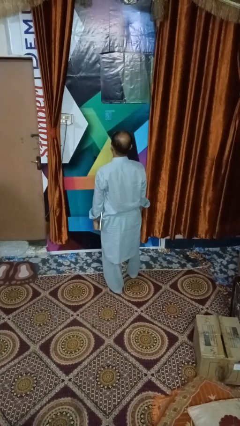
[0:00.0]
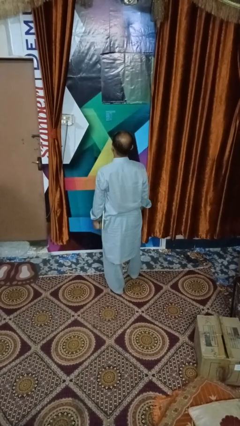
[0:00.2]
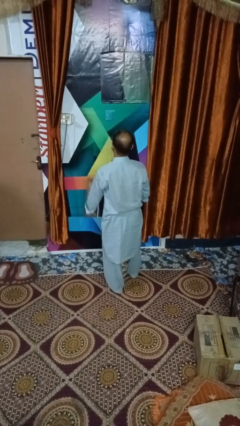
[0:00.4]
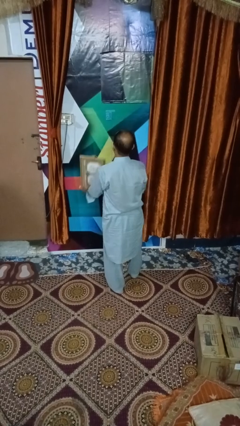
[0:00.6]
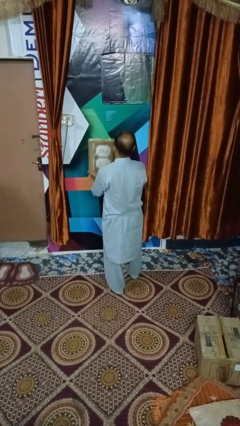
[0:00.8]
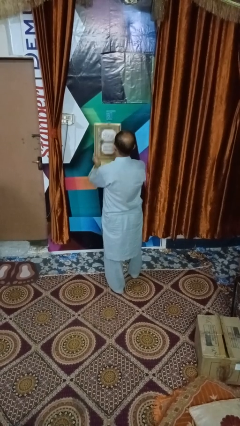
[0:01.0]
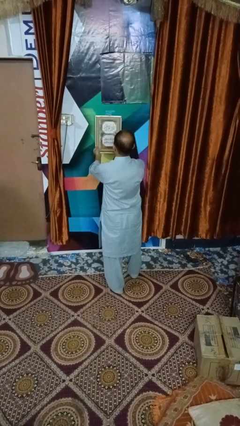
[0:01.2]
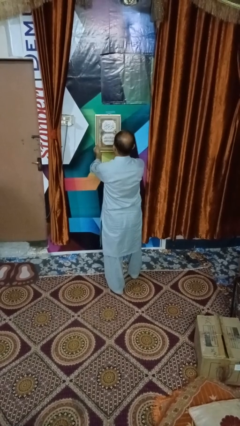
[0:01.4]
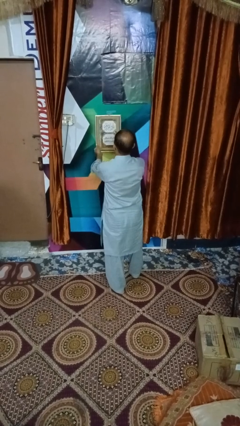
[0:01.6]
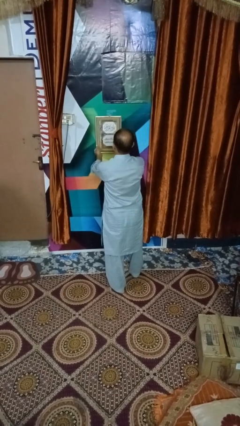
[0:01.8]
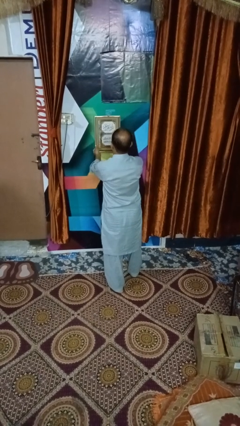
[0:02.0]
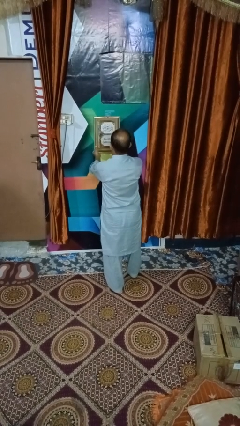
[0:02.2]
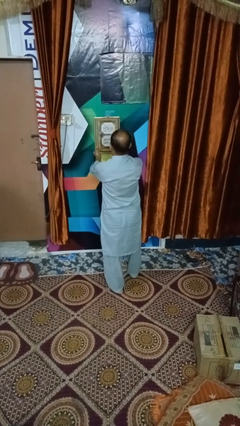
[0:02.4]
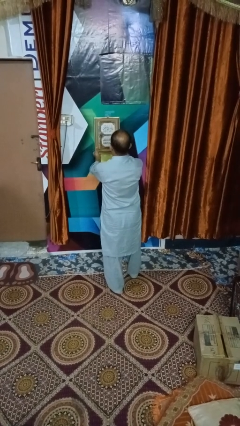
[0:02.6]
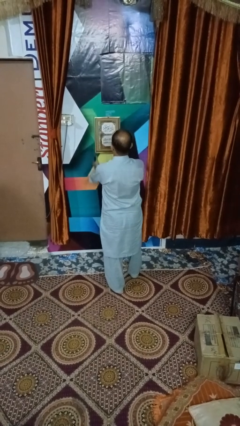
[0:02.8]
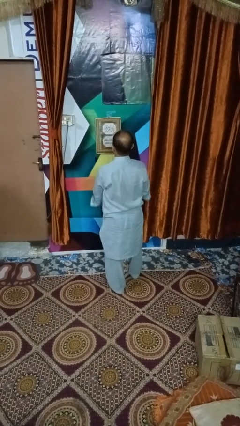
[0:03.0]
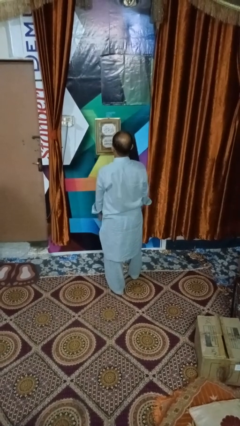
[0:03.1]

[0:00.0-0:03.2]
person puts up picture frame

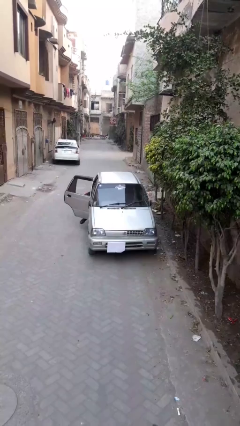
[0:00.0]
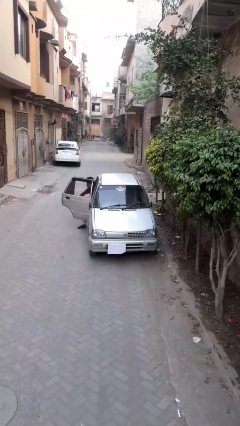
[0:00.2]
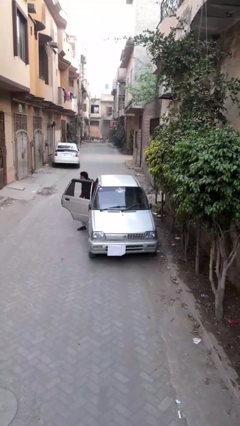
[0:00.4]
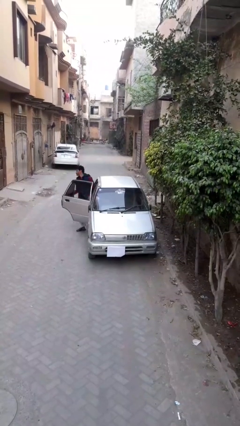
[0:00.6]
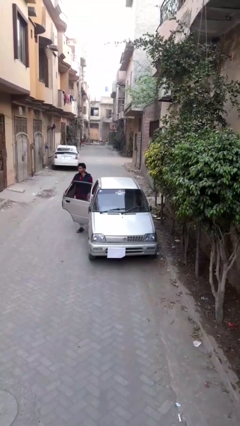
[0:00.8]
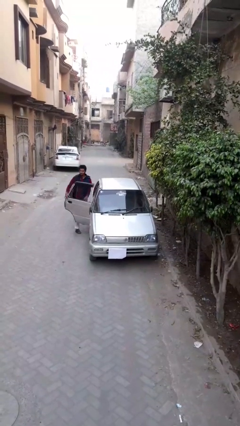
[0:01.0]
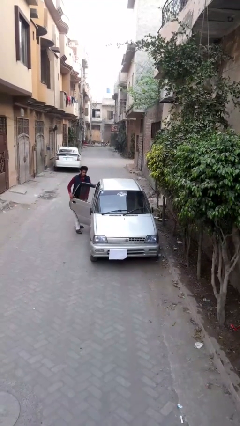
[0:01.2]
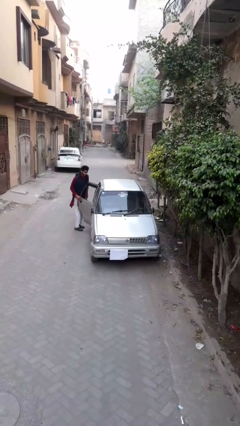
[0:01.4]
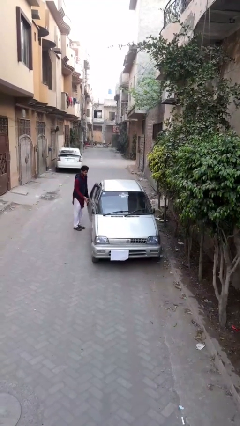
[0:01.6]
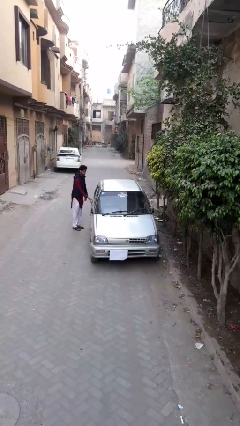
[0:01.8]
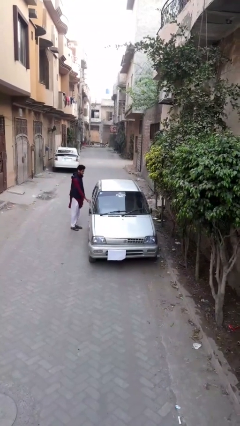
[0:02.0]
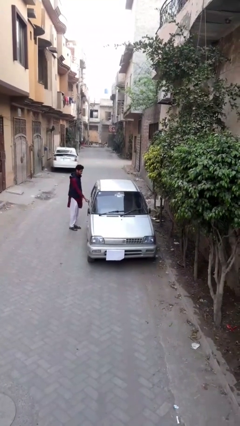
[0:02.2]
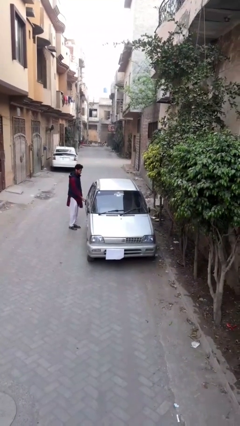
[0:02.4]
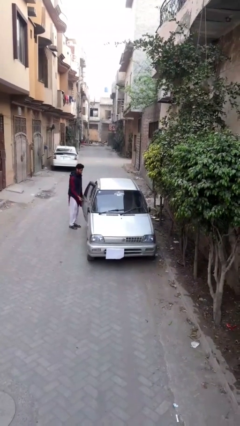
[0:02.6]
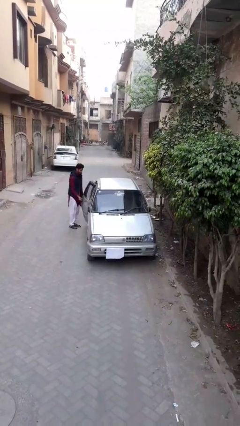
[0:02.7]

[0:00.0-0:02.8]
car drops off person

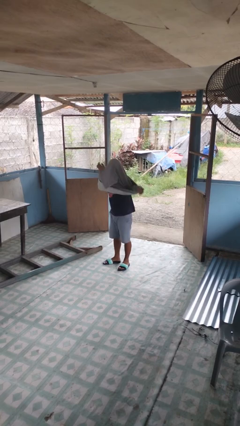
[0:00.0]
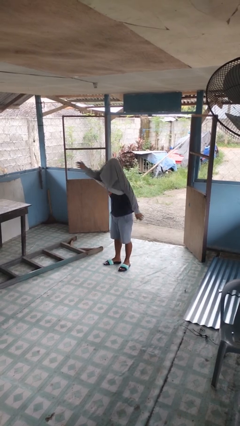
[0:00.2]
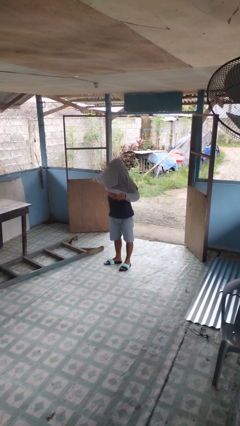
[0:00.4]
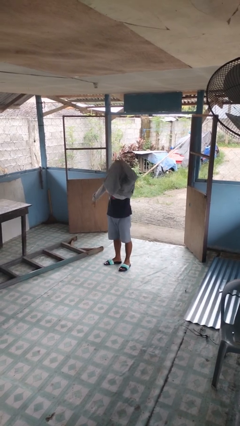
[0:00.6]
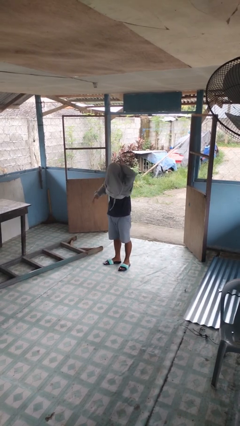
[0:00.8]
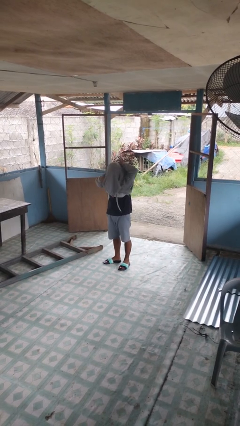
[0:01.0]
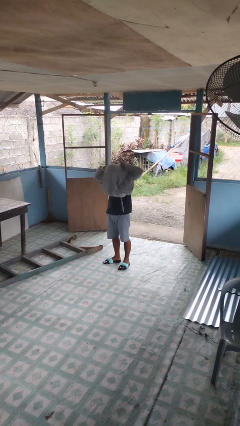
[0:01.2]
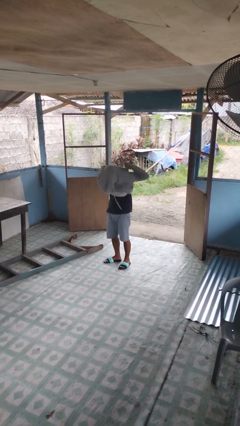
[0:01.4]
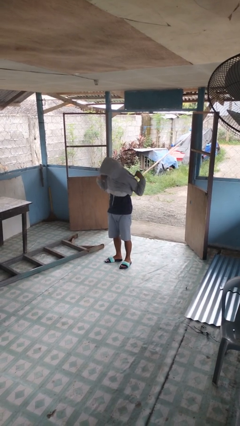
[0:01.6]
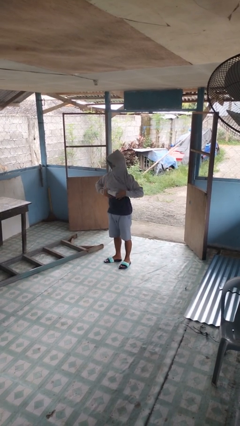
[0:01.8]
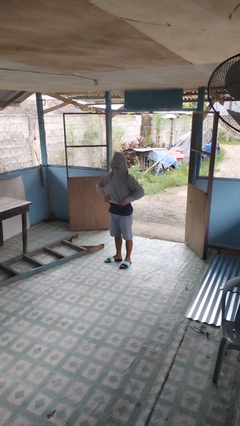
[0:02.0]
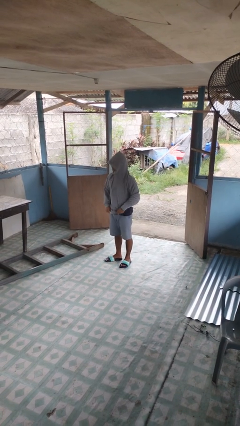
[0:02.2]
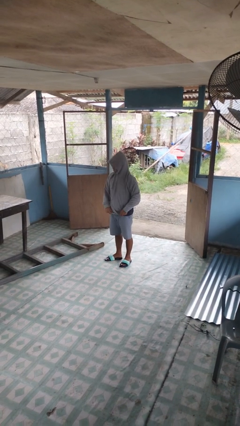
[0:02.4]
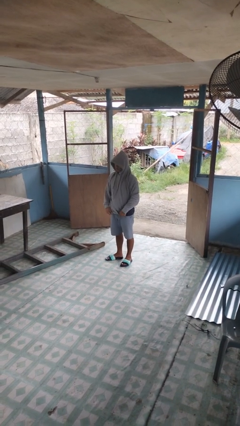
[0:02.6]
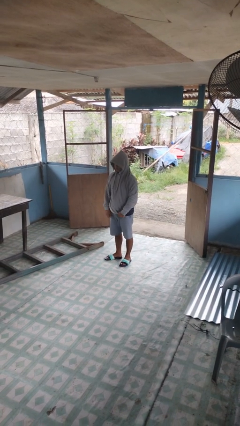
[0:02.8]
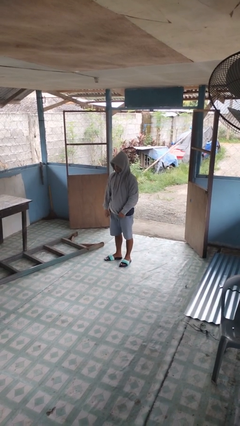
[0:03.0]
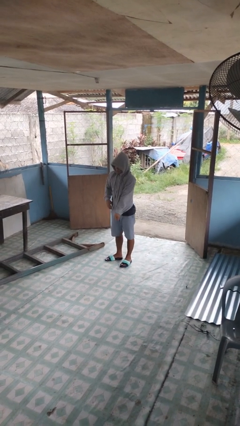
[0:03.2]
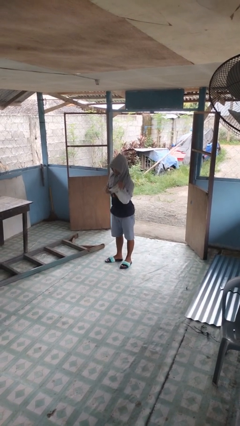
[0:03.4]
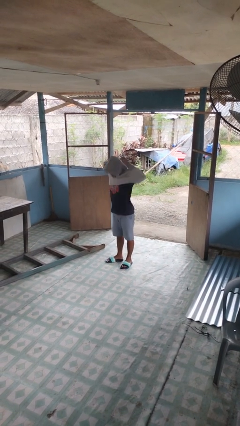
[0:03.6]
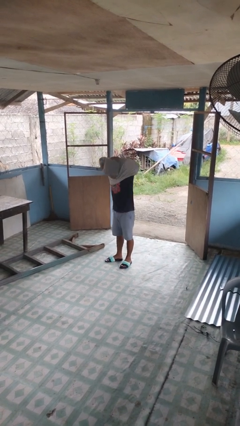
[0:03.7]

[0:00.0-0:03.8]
person puts on hoodie

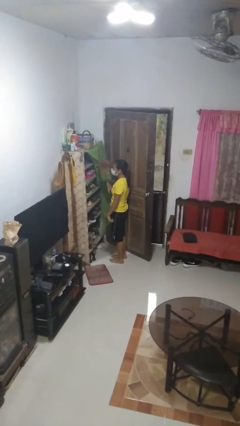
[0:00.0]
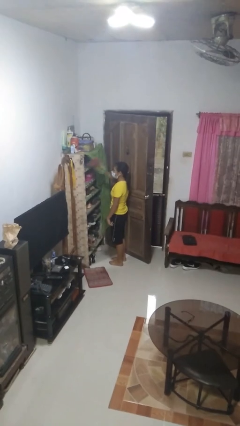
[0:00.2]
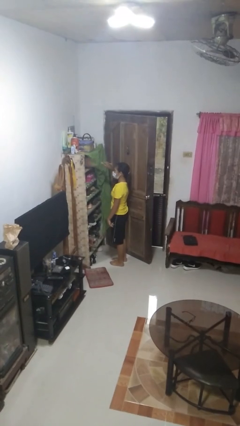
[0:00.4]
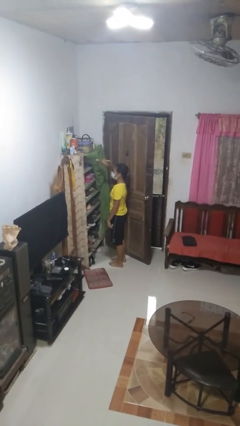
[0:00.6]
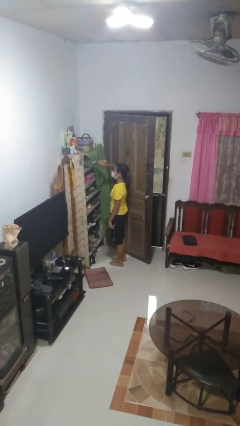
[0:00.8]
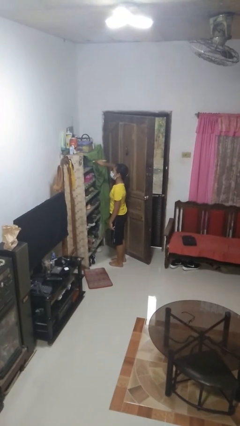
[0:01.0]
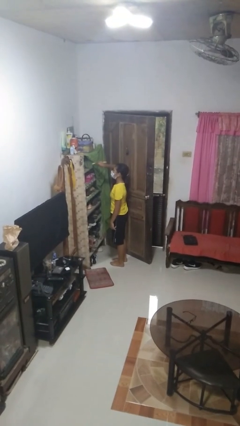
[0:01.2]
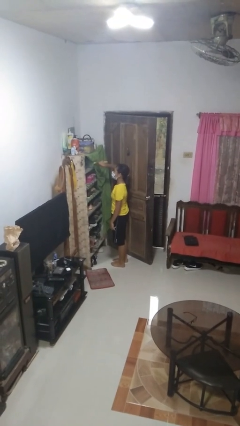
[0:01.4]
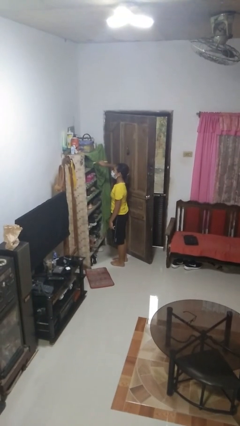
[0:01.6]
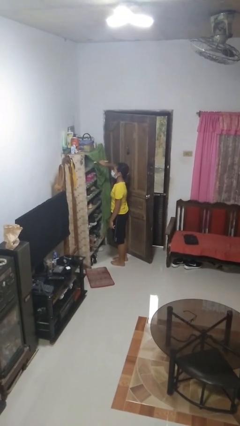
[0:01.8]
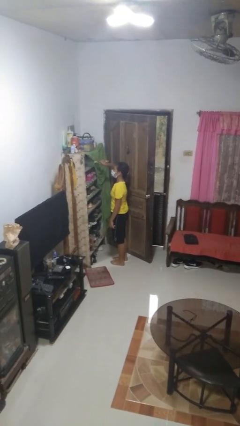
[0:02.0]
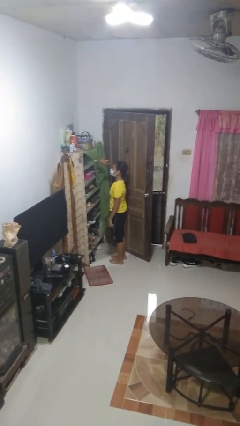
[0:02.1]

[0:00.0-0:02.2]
person dusts furniture

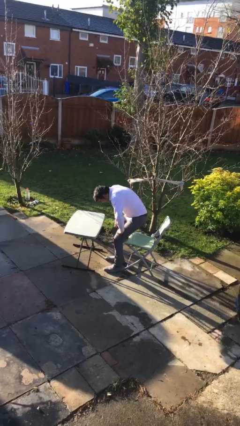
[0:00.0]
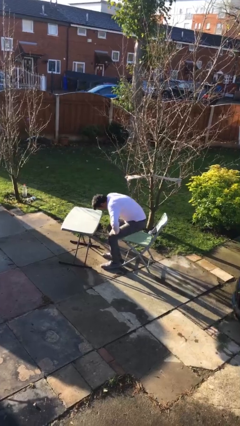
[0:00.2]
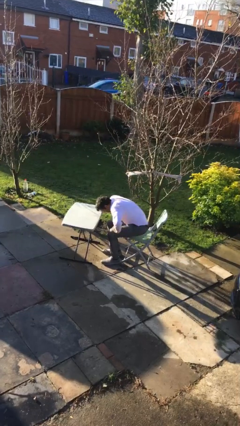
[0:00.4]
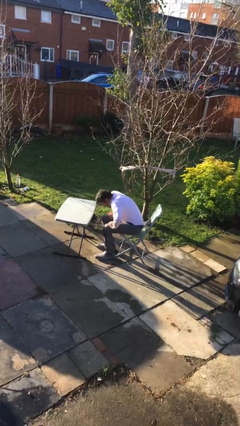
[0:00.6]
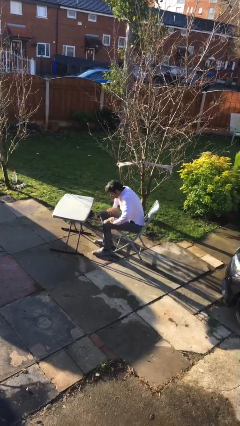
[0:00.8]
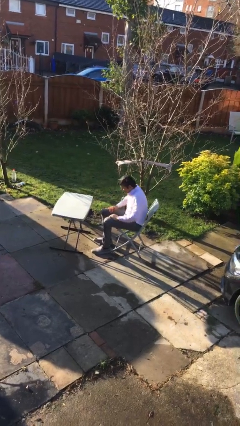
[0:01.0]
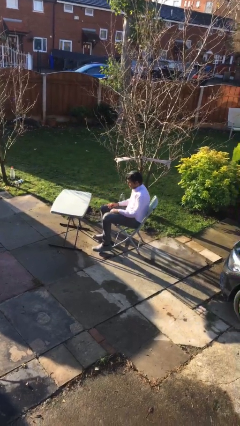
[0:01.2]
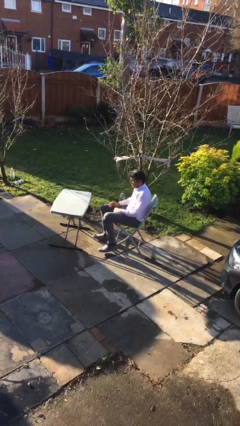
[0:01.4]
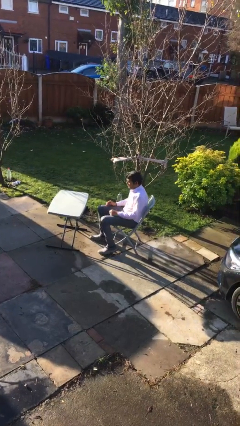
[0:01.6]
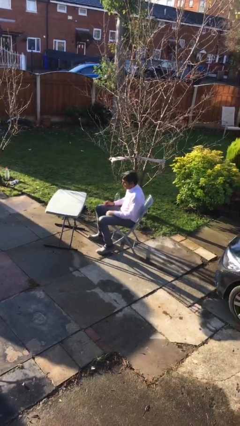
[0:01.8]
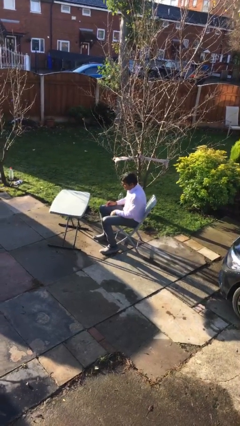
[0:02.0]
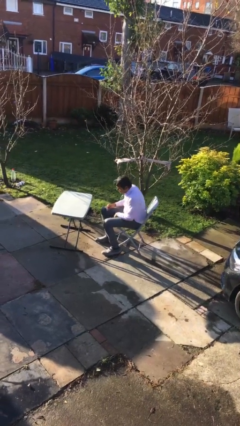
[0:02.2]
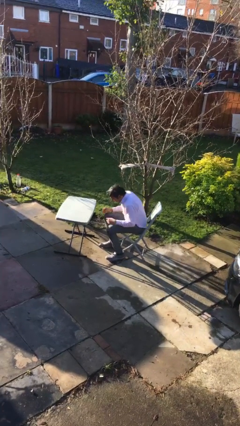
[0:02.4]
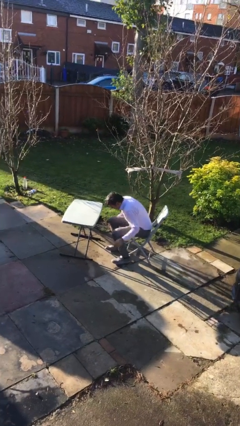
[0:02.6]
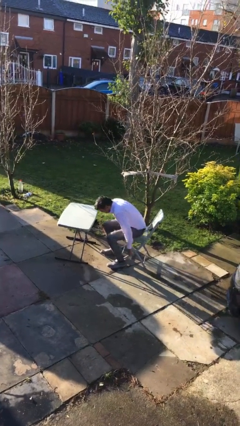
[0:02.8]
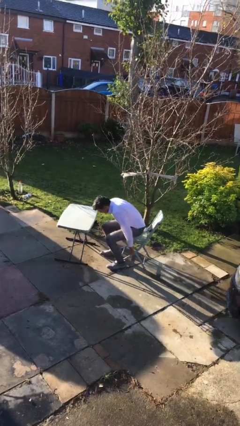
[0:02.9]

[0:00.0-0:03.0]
person sits down

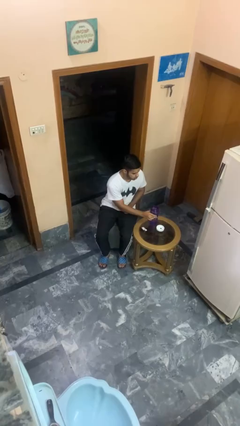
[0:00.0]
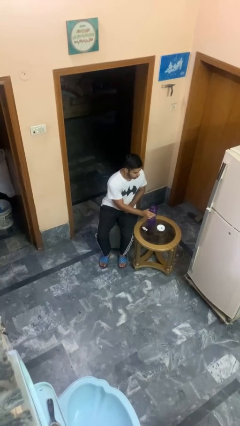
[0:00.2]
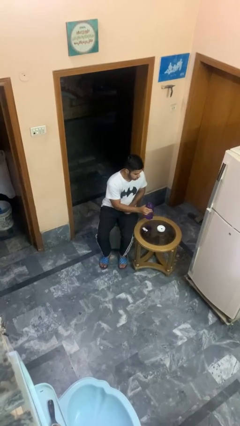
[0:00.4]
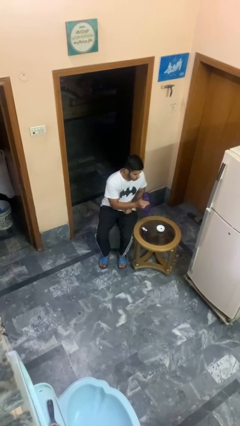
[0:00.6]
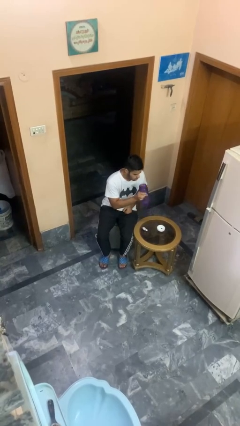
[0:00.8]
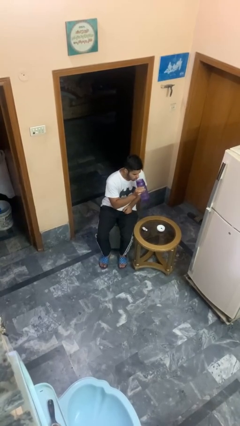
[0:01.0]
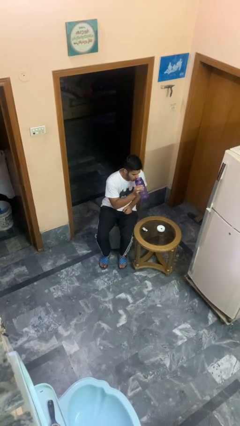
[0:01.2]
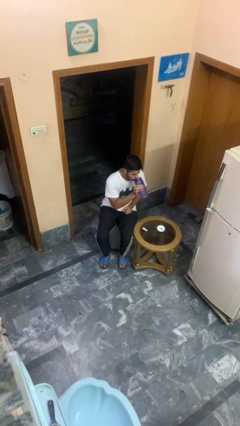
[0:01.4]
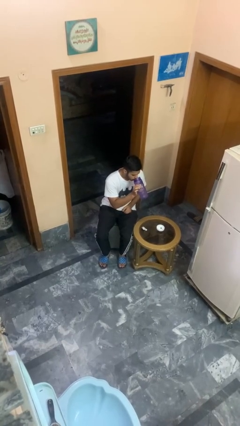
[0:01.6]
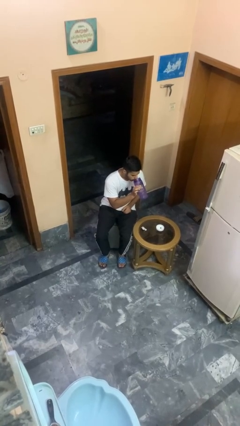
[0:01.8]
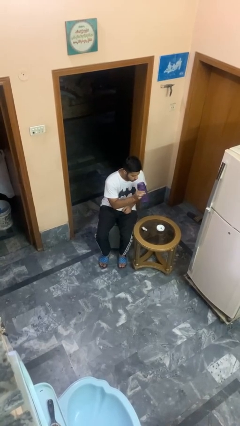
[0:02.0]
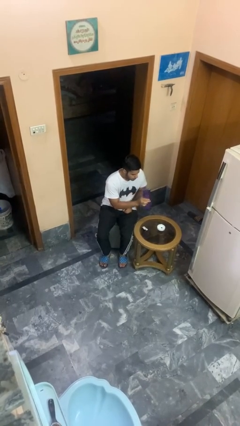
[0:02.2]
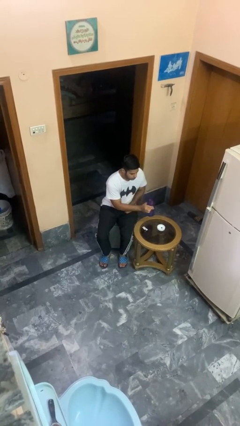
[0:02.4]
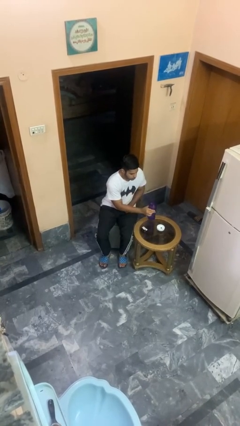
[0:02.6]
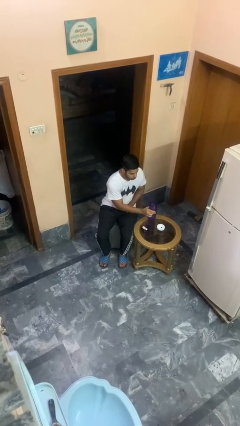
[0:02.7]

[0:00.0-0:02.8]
person drinks from cup

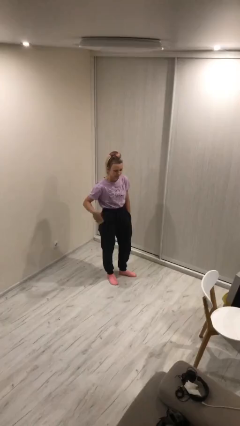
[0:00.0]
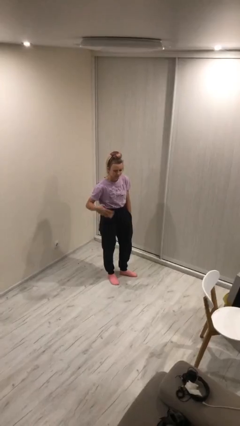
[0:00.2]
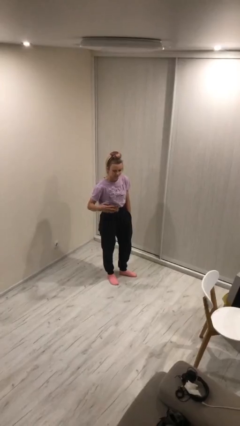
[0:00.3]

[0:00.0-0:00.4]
person takes phone from pocket
